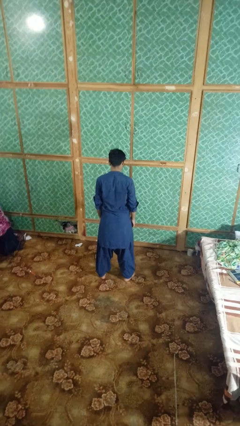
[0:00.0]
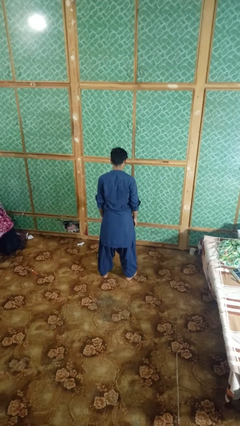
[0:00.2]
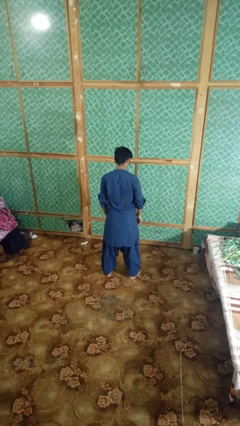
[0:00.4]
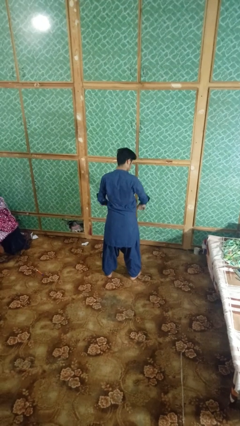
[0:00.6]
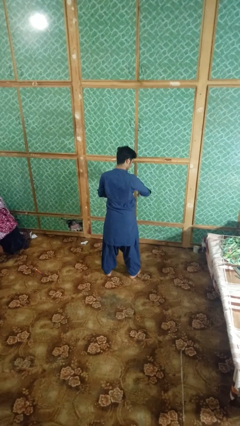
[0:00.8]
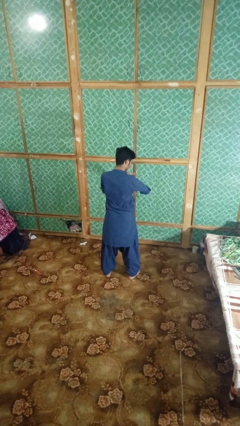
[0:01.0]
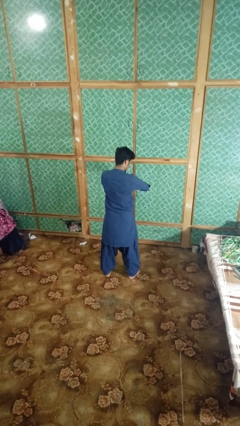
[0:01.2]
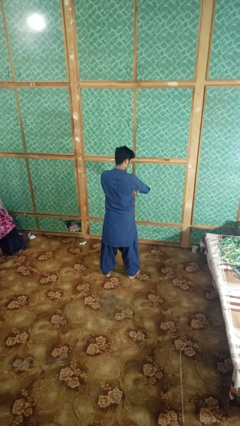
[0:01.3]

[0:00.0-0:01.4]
person swats bug

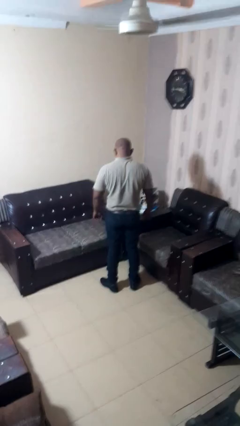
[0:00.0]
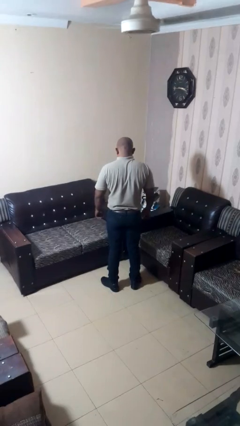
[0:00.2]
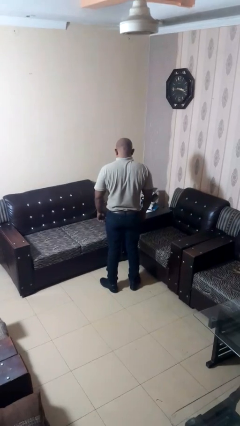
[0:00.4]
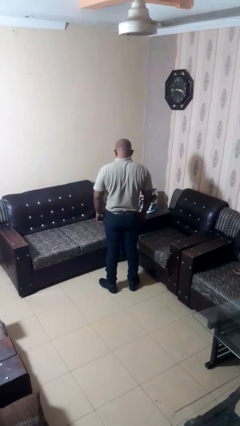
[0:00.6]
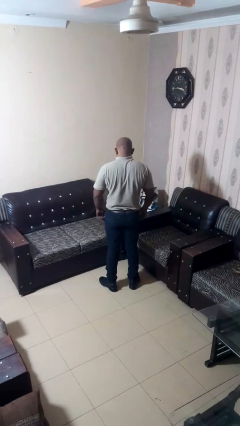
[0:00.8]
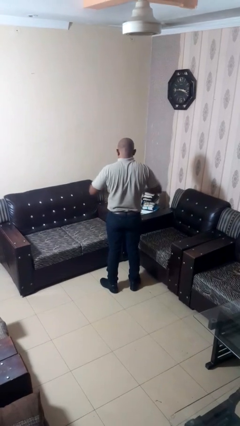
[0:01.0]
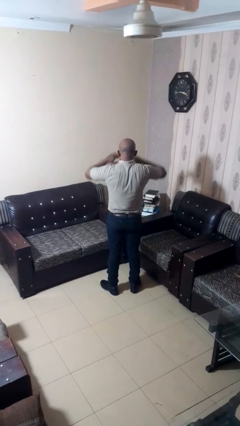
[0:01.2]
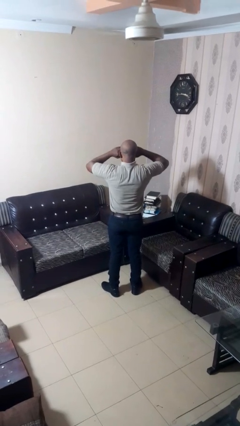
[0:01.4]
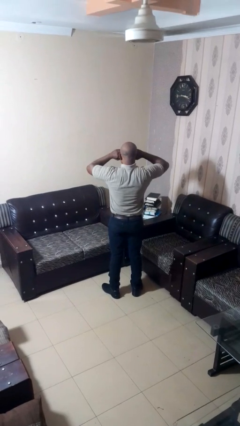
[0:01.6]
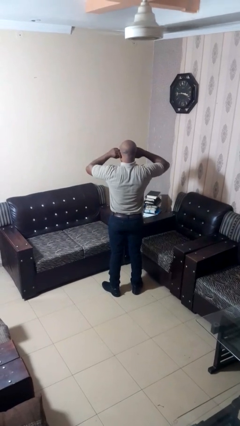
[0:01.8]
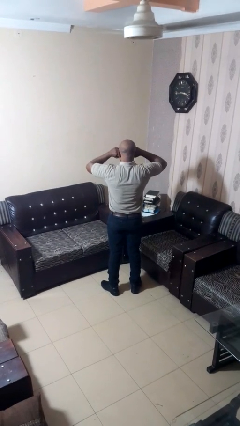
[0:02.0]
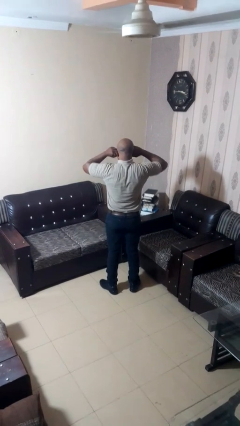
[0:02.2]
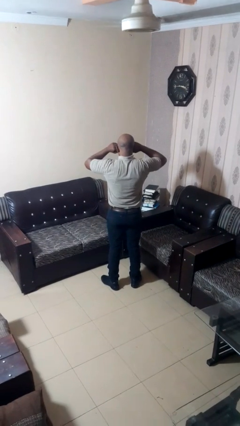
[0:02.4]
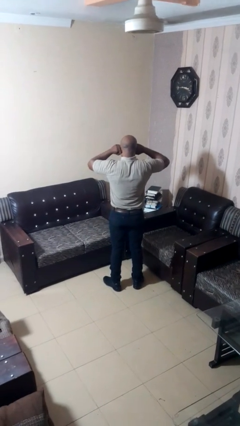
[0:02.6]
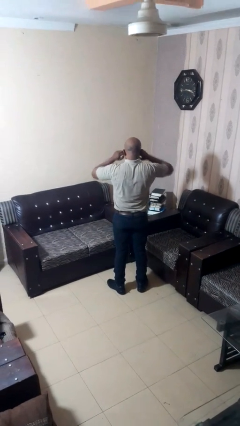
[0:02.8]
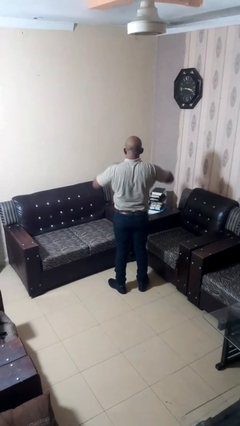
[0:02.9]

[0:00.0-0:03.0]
person rubs eyes

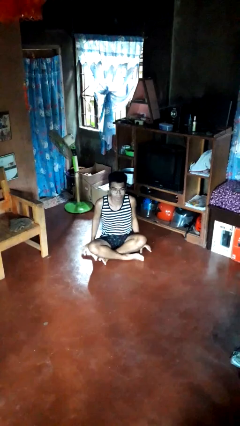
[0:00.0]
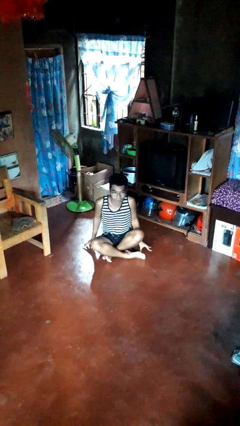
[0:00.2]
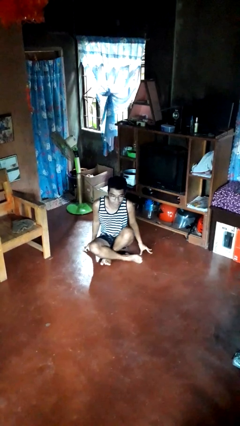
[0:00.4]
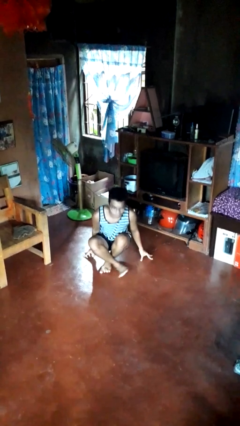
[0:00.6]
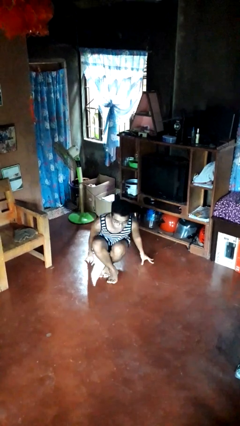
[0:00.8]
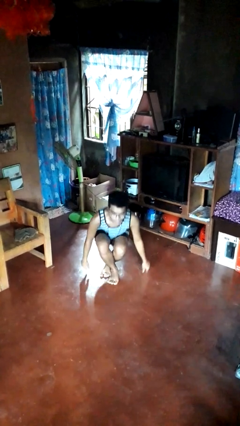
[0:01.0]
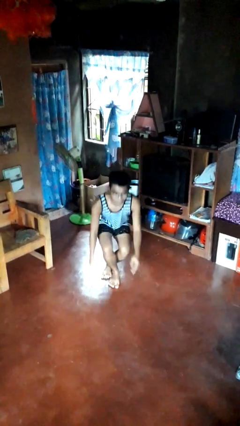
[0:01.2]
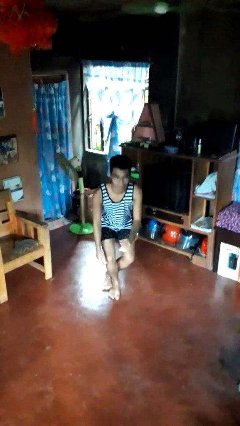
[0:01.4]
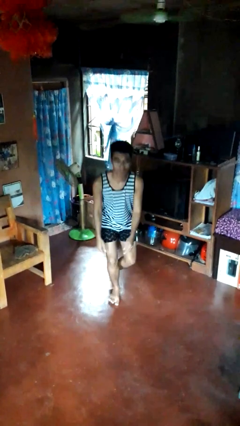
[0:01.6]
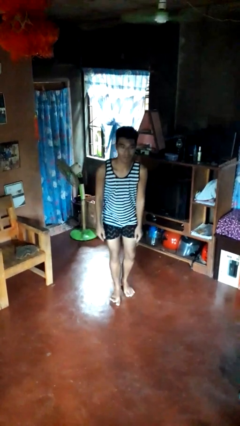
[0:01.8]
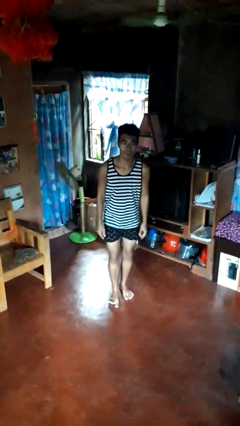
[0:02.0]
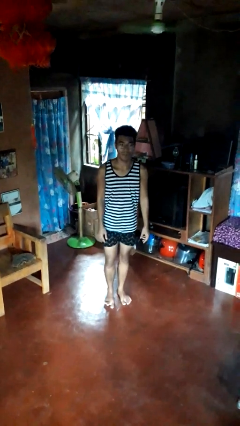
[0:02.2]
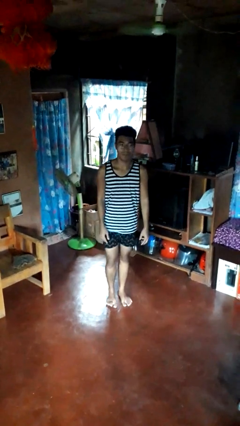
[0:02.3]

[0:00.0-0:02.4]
person stands up from floor

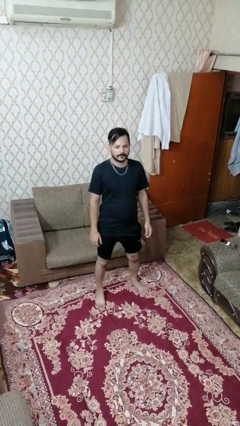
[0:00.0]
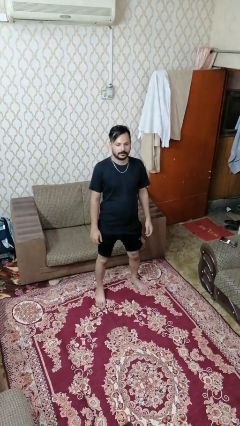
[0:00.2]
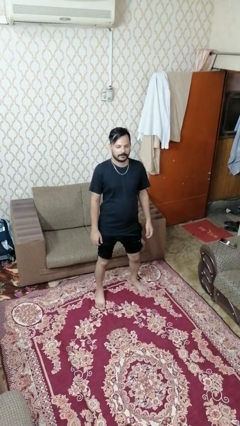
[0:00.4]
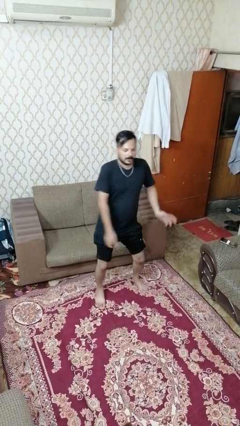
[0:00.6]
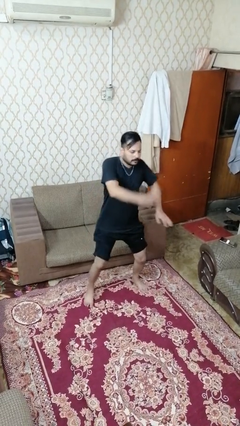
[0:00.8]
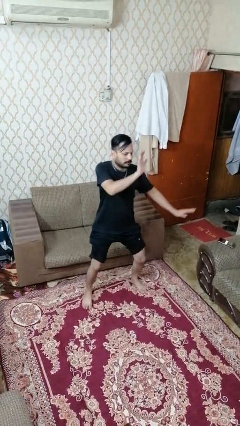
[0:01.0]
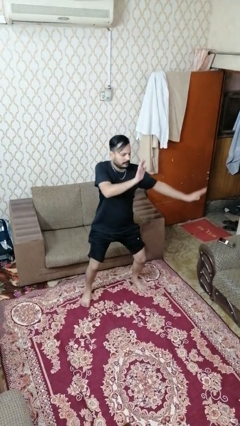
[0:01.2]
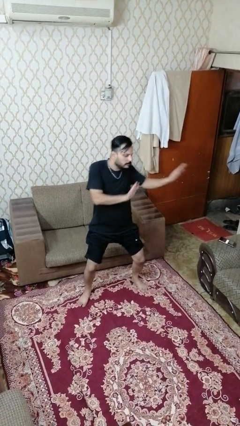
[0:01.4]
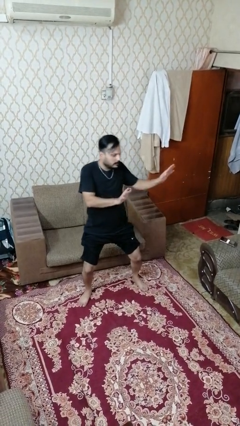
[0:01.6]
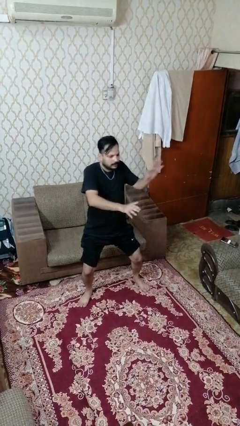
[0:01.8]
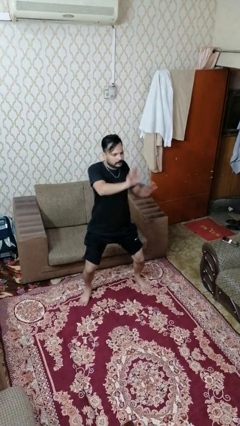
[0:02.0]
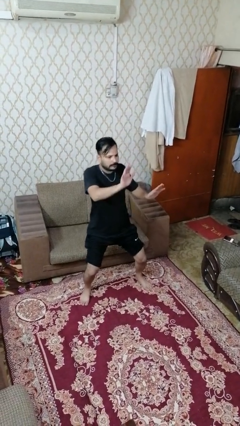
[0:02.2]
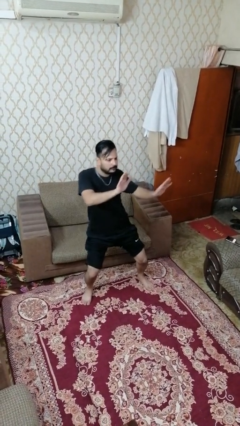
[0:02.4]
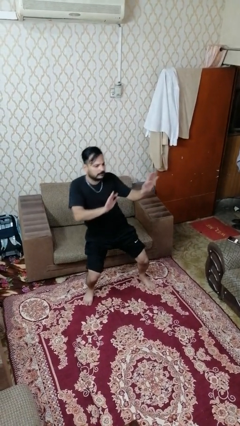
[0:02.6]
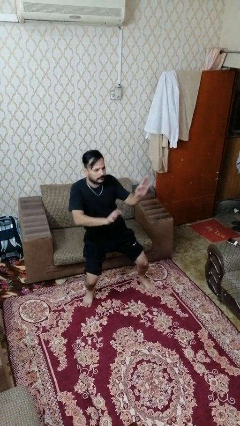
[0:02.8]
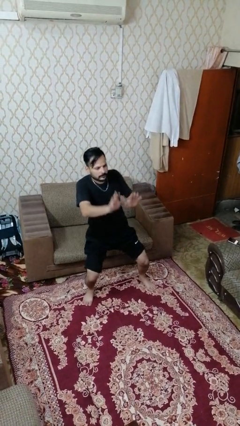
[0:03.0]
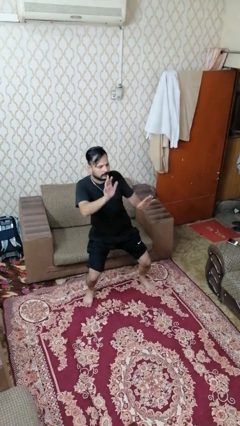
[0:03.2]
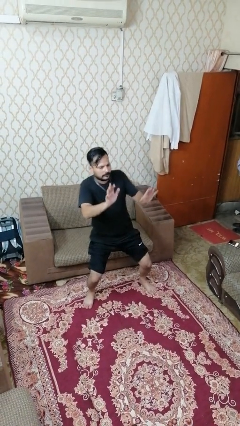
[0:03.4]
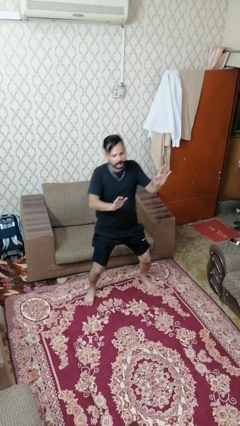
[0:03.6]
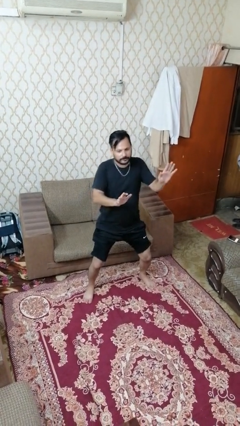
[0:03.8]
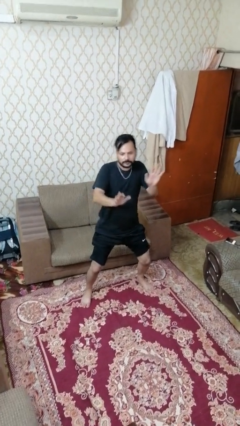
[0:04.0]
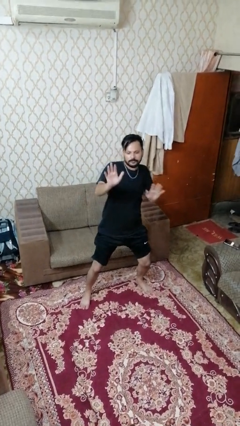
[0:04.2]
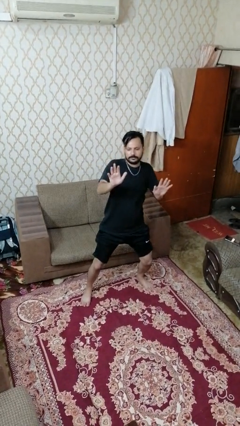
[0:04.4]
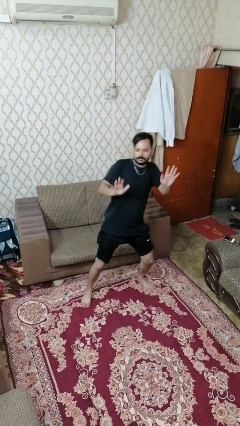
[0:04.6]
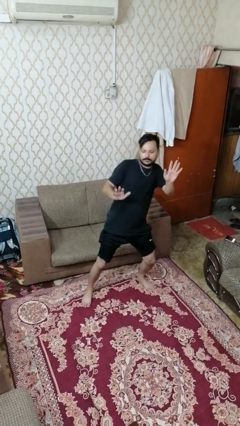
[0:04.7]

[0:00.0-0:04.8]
person dances in place

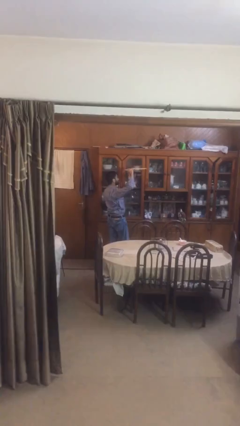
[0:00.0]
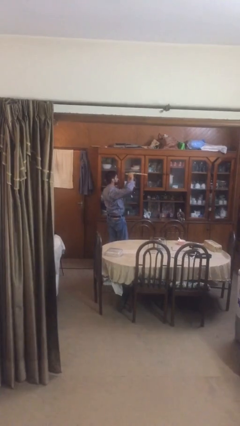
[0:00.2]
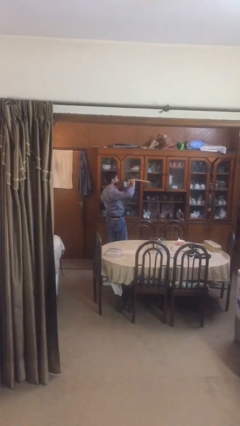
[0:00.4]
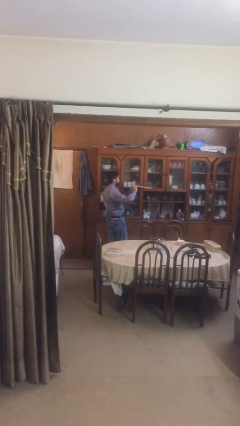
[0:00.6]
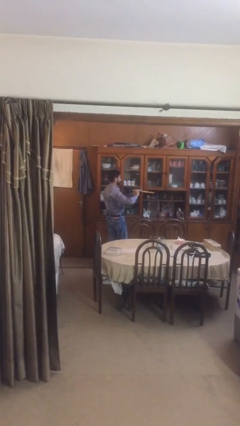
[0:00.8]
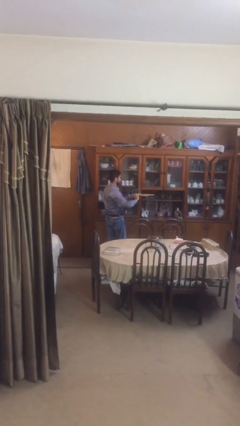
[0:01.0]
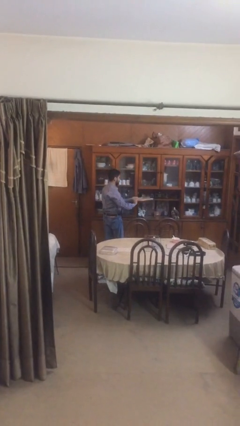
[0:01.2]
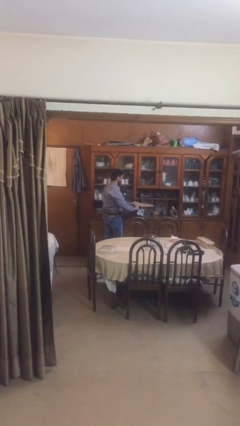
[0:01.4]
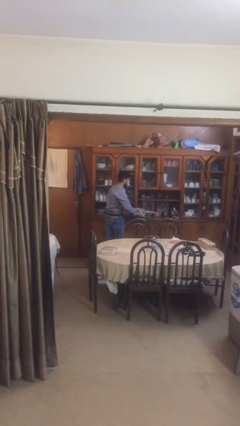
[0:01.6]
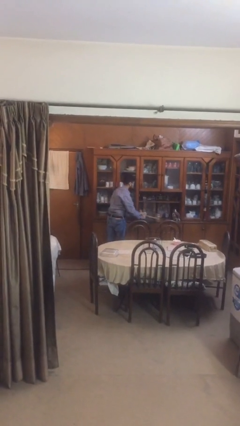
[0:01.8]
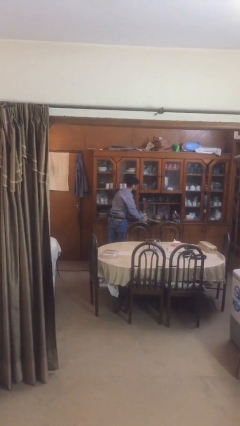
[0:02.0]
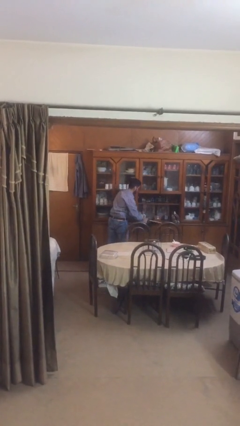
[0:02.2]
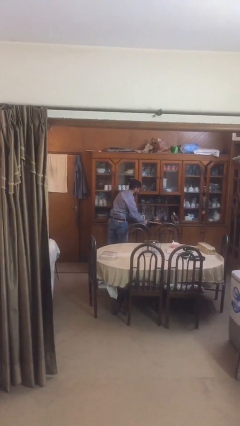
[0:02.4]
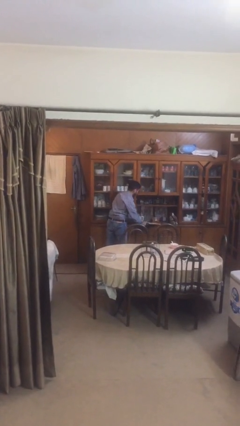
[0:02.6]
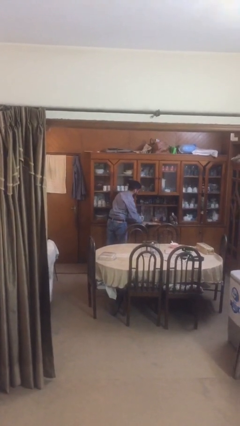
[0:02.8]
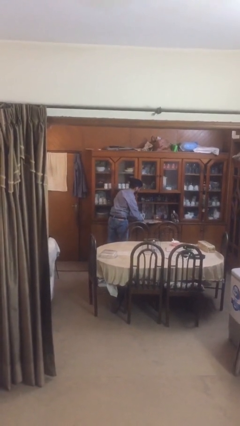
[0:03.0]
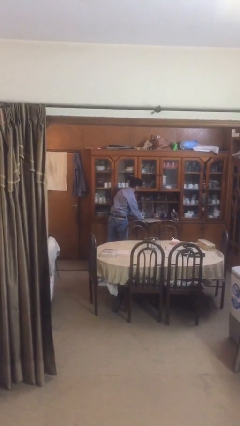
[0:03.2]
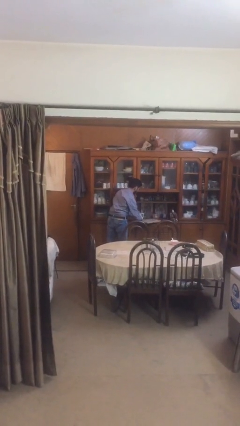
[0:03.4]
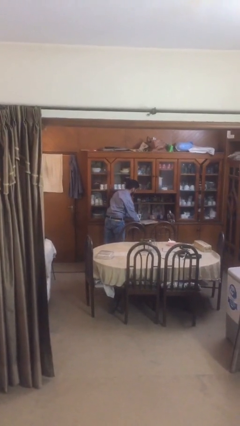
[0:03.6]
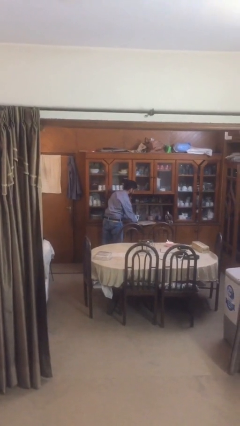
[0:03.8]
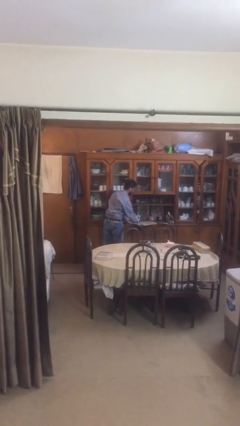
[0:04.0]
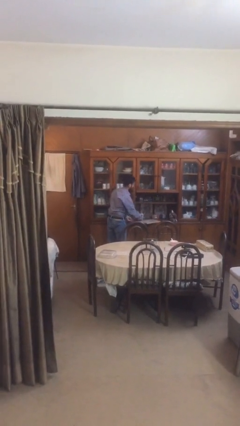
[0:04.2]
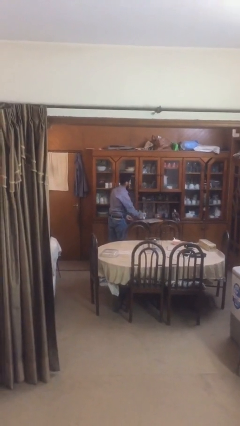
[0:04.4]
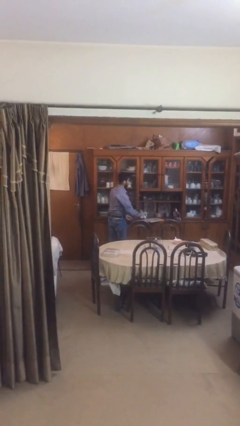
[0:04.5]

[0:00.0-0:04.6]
person puts down object on table

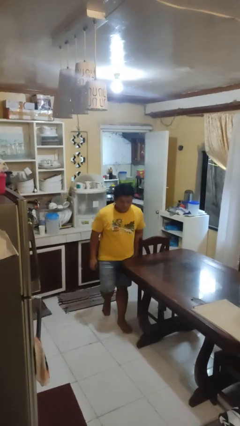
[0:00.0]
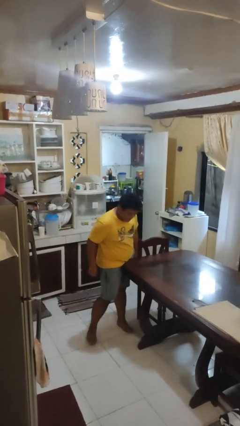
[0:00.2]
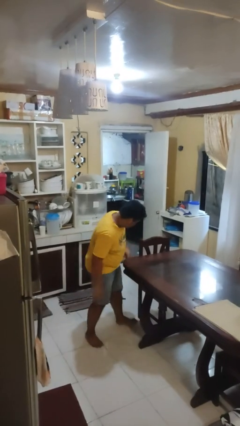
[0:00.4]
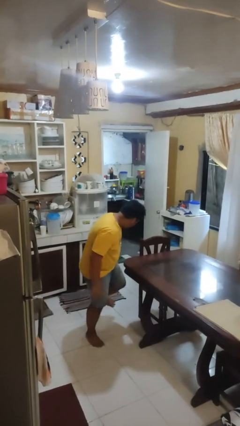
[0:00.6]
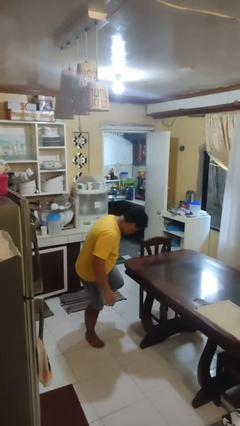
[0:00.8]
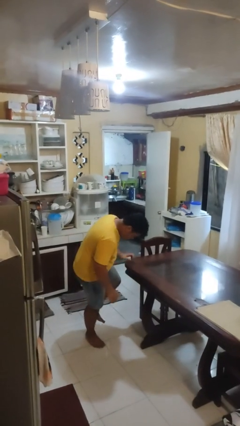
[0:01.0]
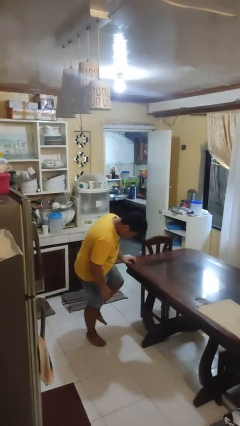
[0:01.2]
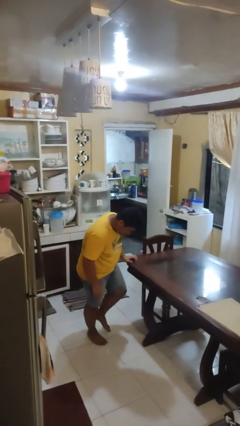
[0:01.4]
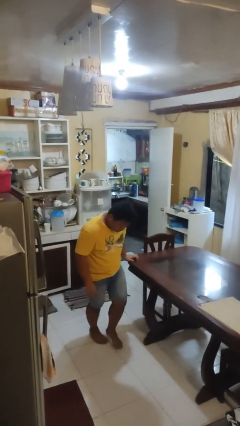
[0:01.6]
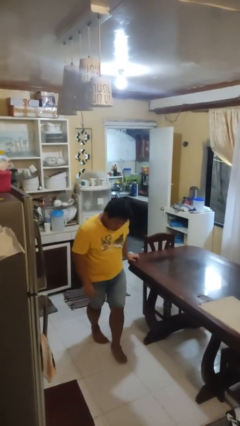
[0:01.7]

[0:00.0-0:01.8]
person bumps into table
